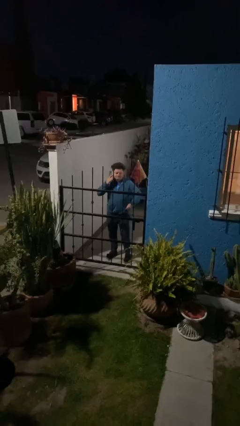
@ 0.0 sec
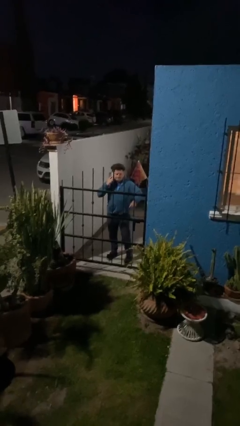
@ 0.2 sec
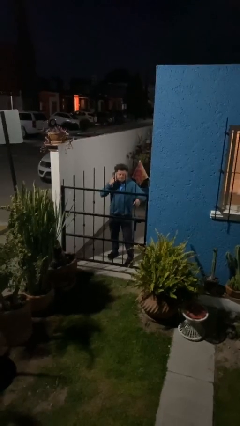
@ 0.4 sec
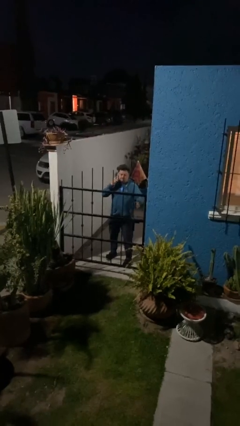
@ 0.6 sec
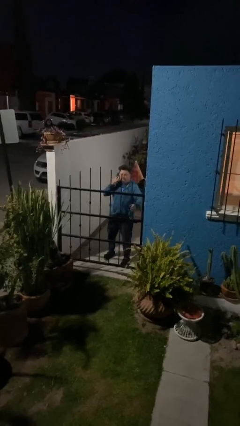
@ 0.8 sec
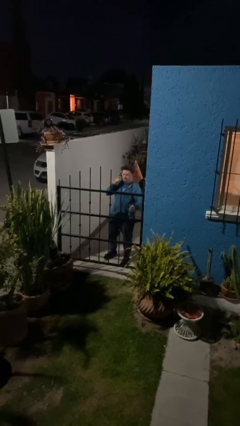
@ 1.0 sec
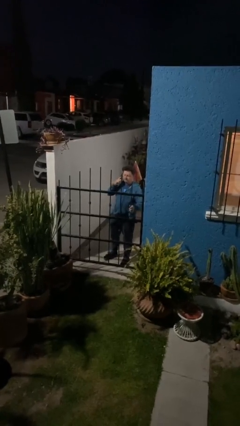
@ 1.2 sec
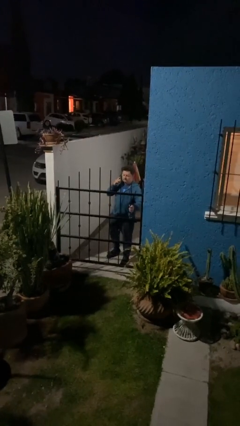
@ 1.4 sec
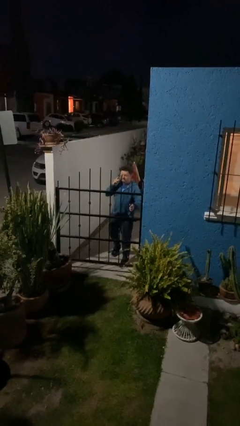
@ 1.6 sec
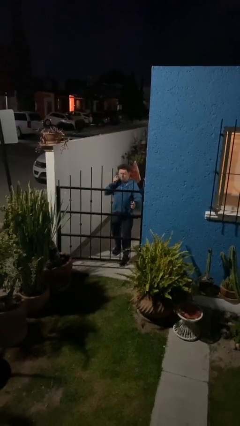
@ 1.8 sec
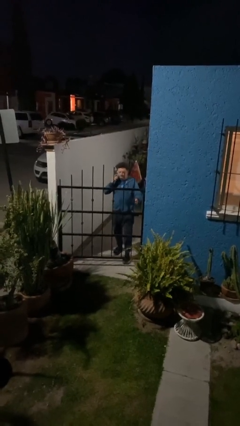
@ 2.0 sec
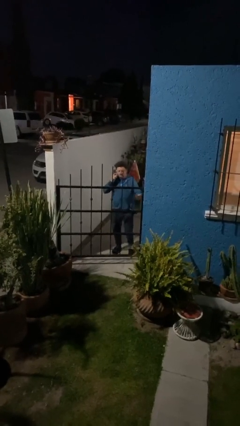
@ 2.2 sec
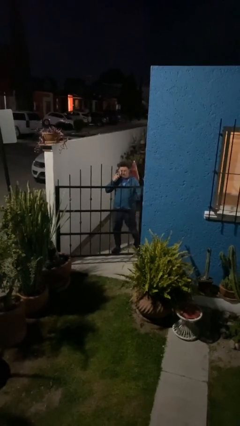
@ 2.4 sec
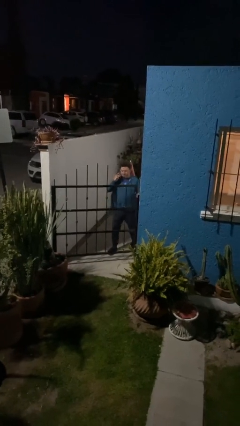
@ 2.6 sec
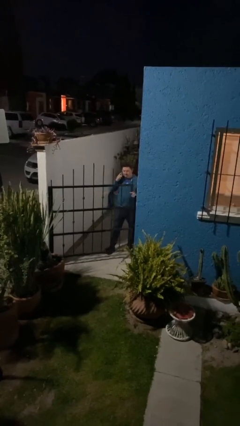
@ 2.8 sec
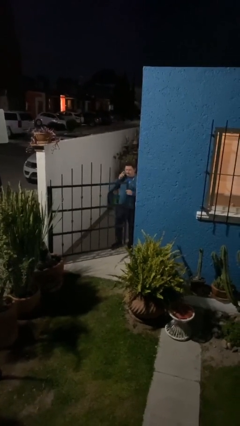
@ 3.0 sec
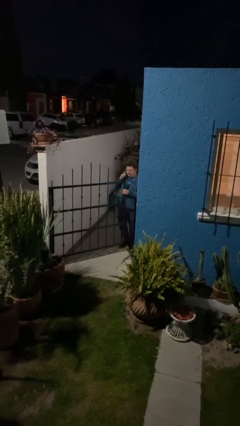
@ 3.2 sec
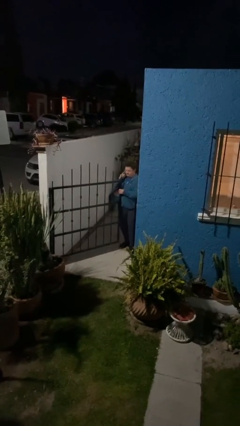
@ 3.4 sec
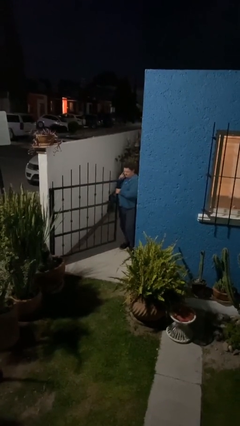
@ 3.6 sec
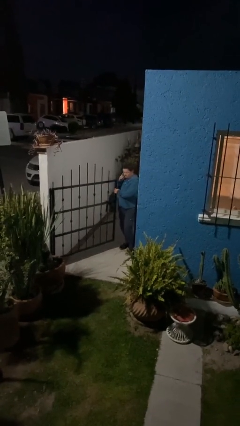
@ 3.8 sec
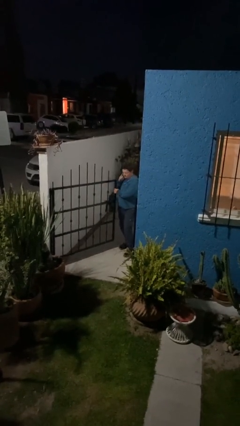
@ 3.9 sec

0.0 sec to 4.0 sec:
person opens facility door

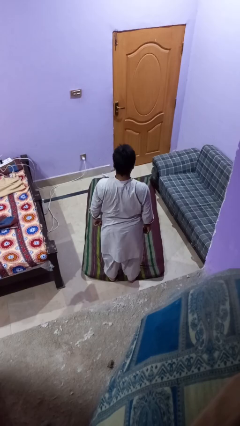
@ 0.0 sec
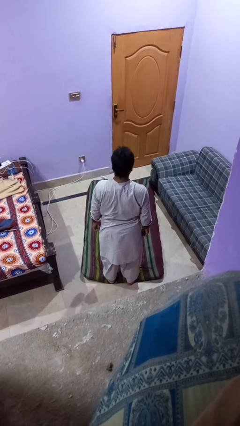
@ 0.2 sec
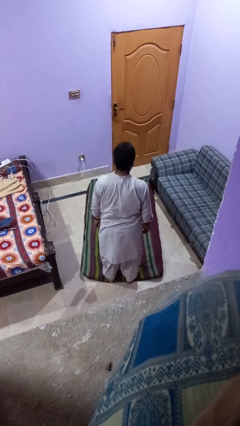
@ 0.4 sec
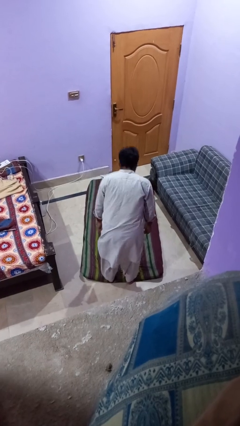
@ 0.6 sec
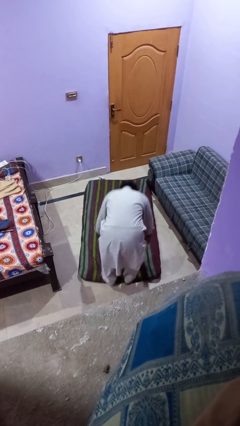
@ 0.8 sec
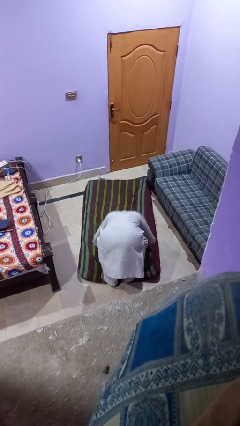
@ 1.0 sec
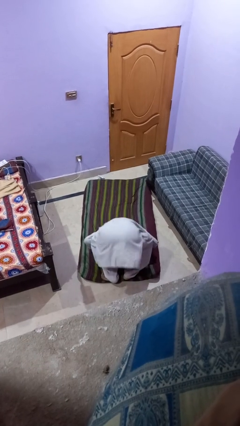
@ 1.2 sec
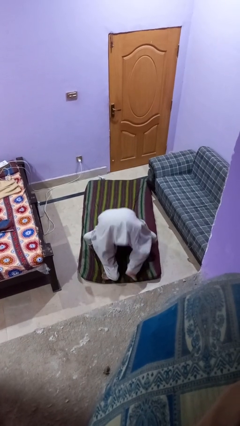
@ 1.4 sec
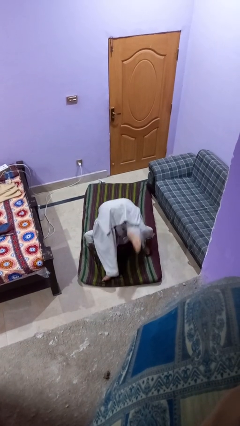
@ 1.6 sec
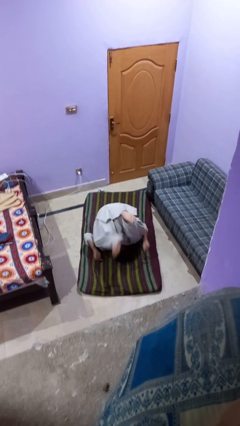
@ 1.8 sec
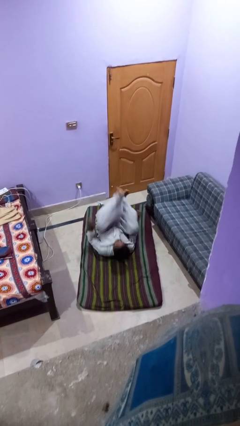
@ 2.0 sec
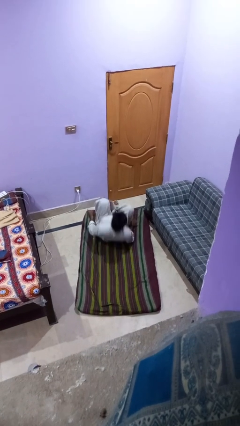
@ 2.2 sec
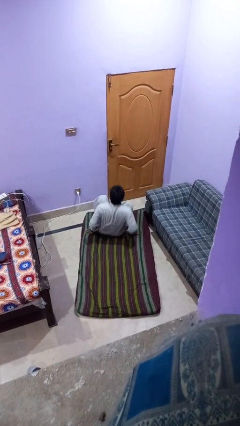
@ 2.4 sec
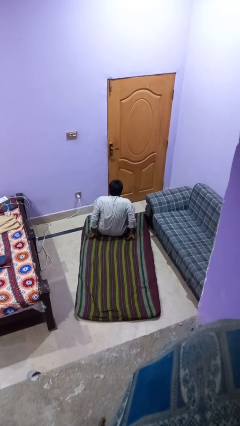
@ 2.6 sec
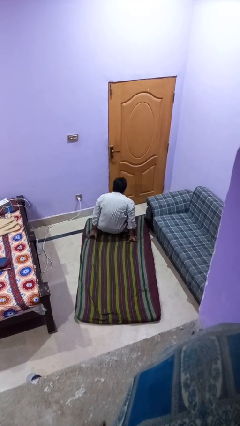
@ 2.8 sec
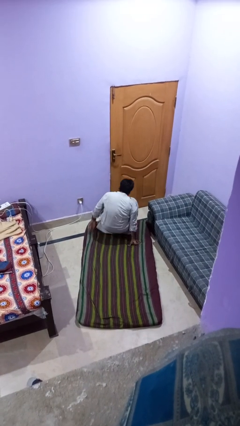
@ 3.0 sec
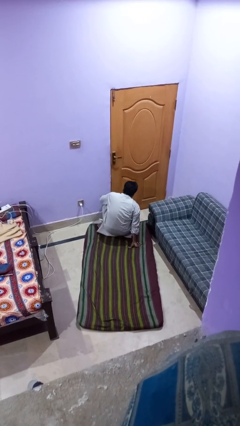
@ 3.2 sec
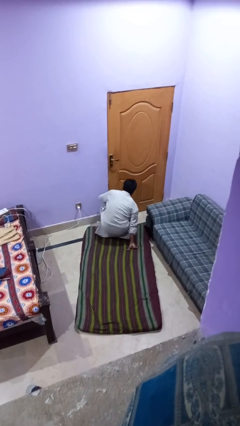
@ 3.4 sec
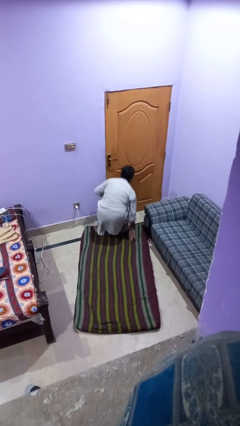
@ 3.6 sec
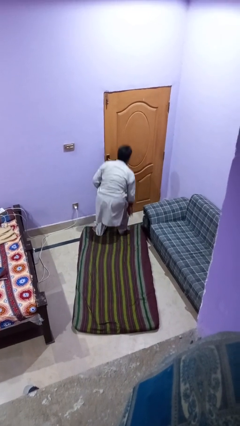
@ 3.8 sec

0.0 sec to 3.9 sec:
person somersaults

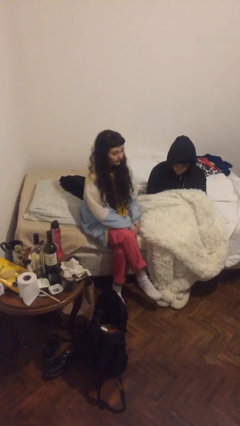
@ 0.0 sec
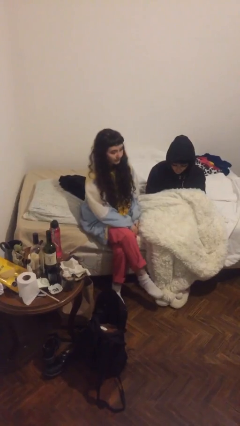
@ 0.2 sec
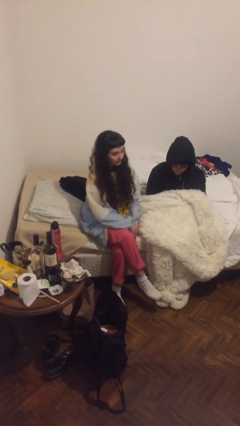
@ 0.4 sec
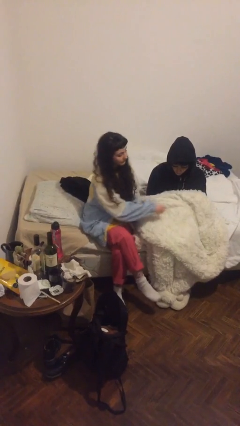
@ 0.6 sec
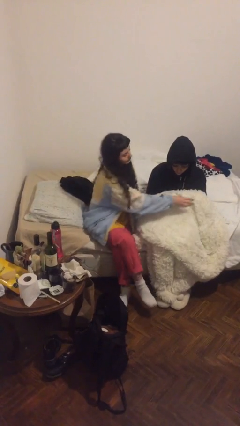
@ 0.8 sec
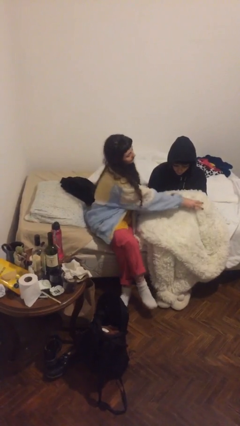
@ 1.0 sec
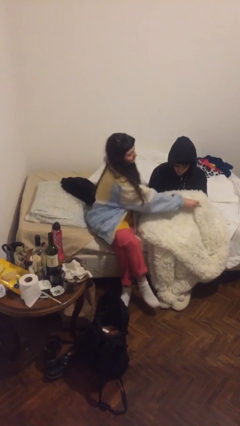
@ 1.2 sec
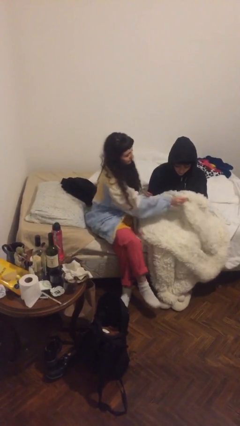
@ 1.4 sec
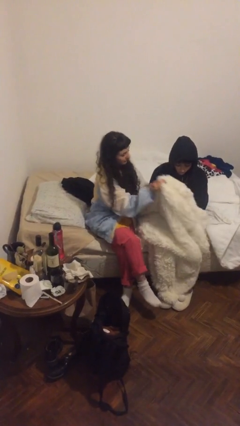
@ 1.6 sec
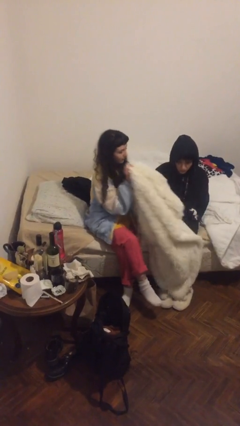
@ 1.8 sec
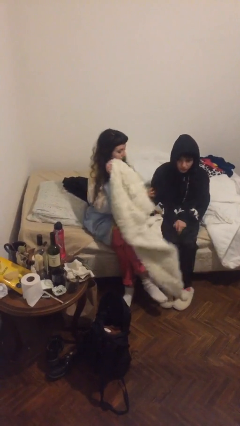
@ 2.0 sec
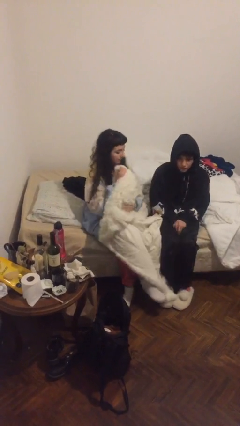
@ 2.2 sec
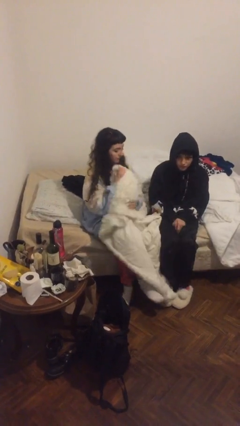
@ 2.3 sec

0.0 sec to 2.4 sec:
person uncovers friend with blanket

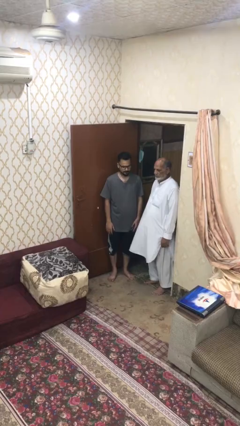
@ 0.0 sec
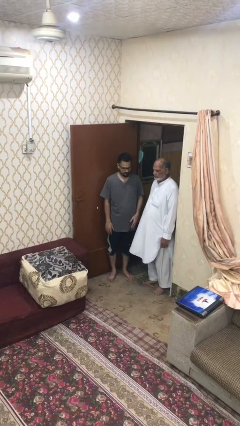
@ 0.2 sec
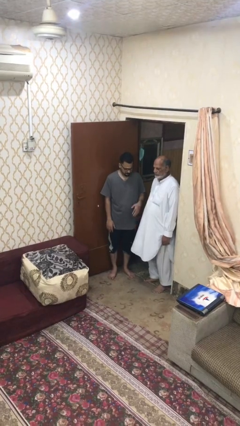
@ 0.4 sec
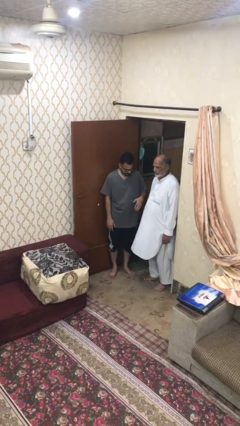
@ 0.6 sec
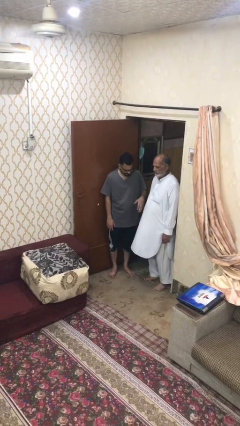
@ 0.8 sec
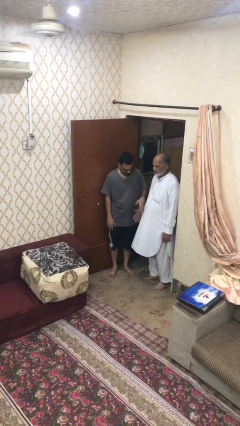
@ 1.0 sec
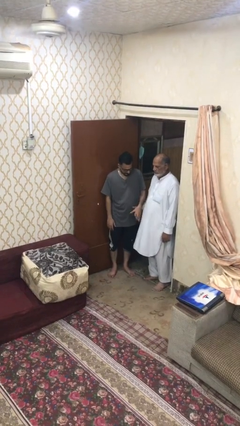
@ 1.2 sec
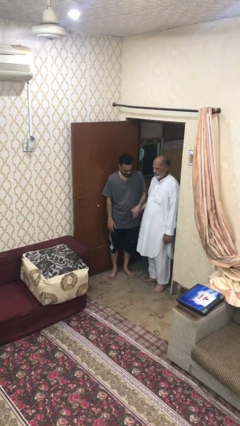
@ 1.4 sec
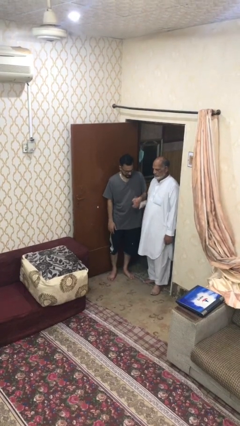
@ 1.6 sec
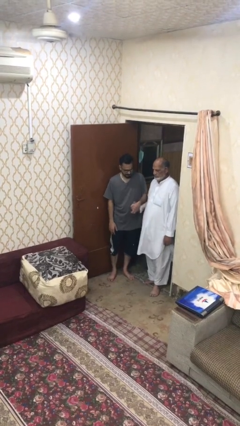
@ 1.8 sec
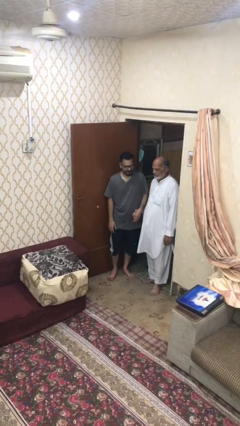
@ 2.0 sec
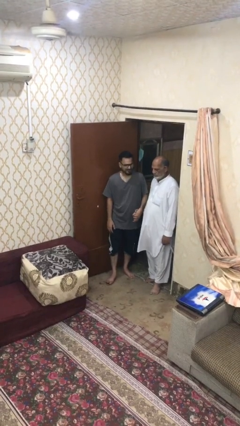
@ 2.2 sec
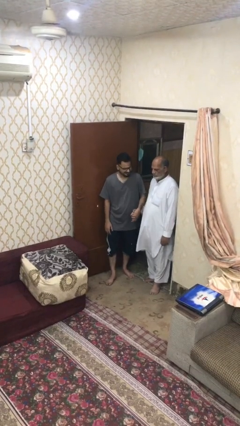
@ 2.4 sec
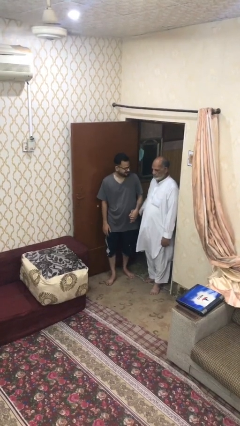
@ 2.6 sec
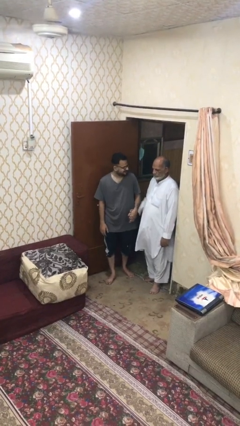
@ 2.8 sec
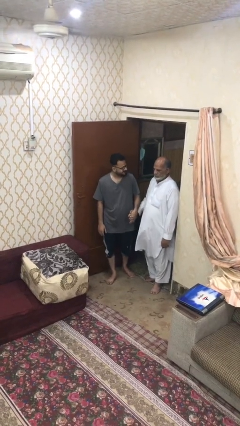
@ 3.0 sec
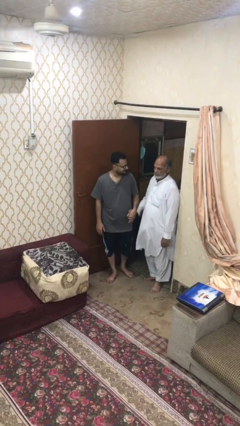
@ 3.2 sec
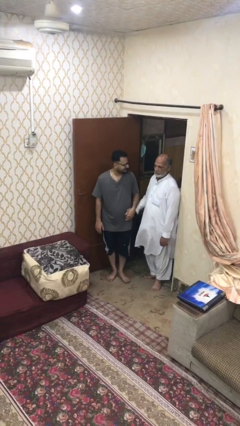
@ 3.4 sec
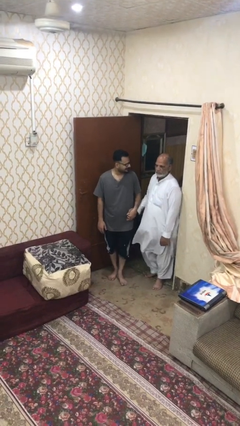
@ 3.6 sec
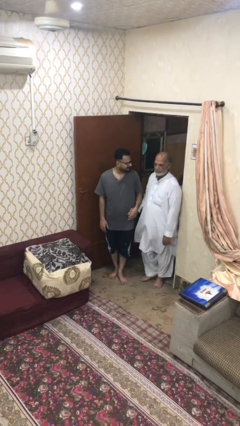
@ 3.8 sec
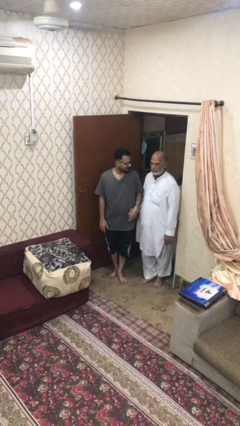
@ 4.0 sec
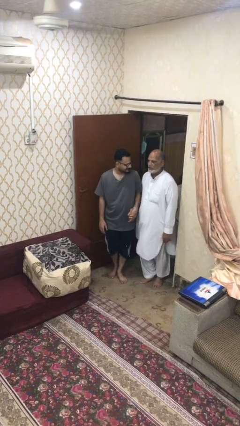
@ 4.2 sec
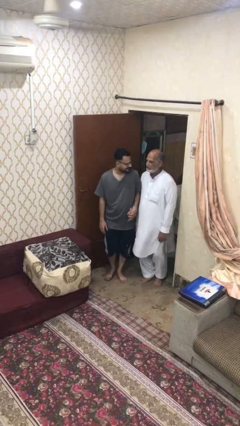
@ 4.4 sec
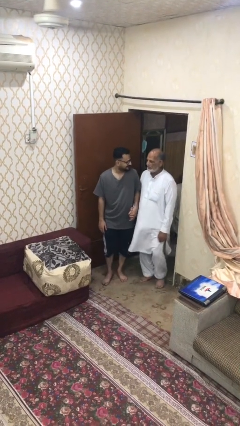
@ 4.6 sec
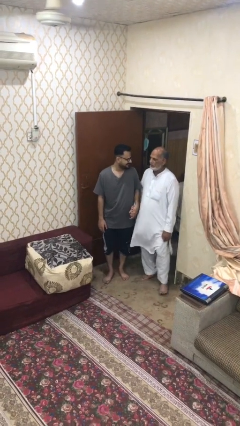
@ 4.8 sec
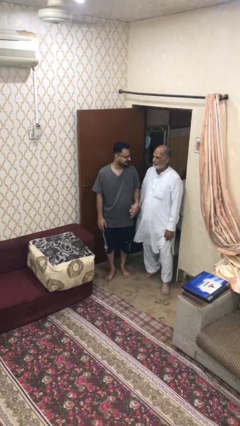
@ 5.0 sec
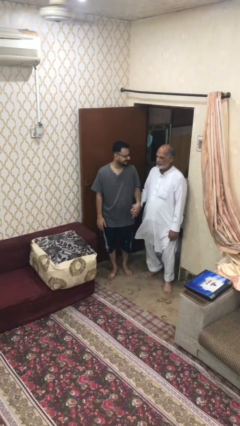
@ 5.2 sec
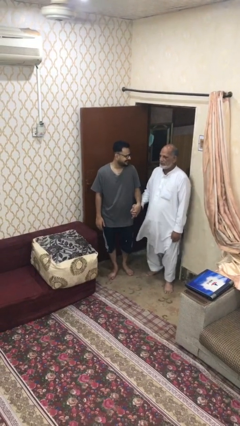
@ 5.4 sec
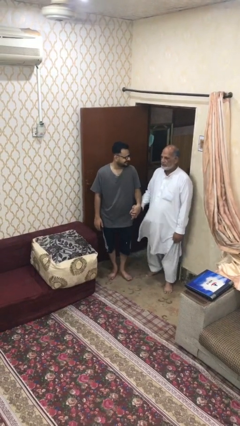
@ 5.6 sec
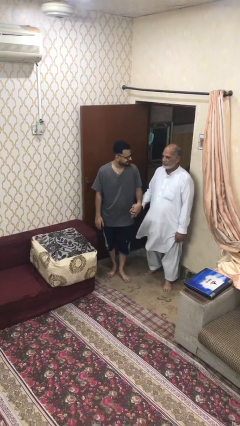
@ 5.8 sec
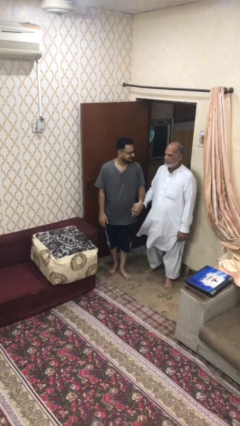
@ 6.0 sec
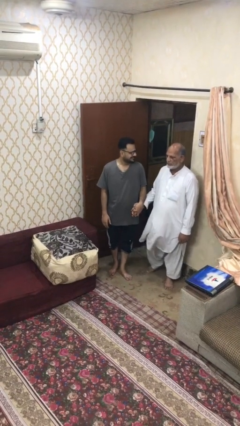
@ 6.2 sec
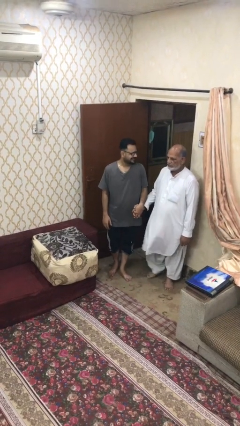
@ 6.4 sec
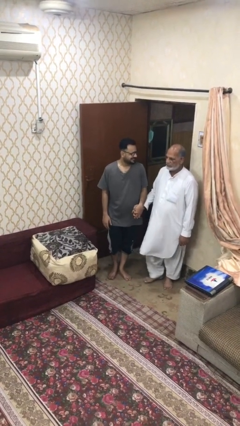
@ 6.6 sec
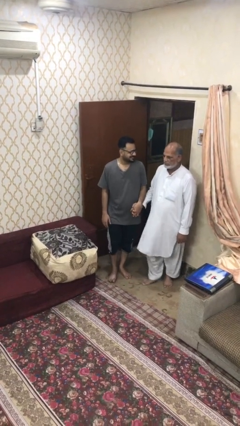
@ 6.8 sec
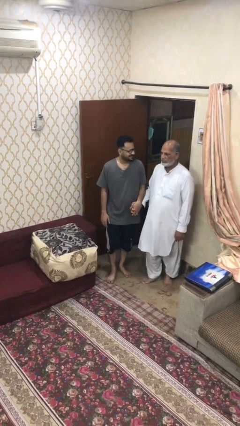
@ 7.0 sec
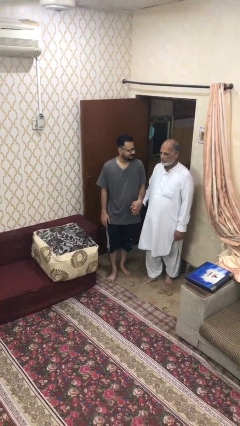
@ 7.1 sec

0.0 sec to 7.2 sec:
person holds hand
